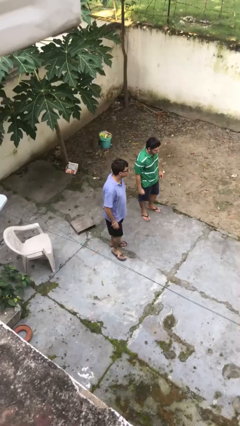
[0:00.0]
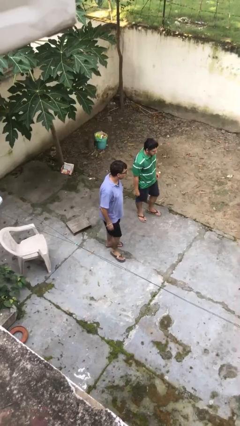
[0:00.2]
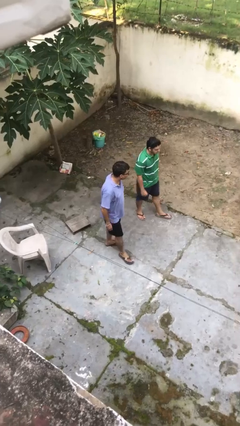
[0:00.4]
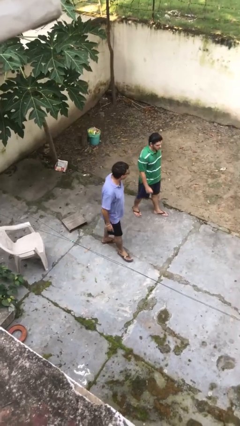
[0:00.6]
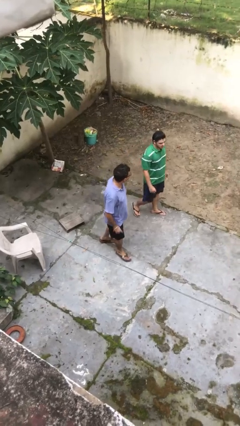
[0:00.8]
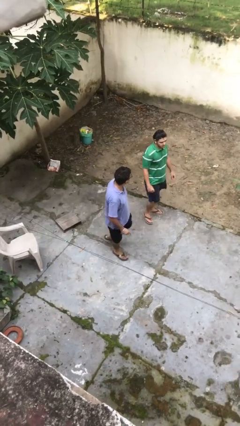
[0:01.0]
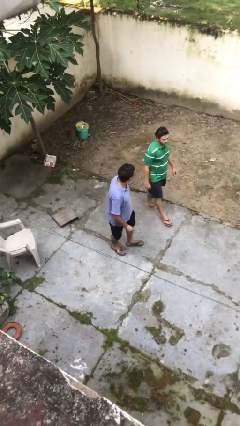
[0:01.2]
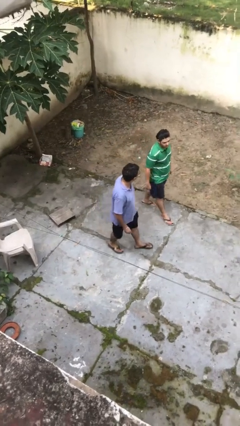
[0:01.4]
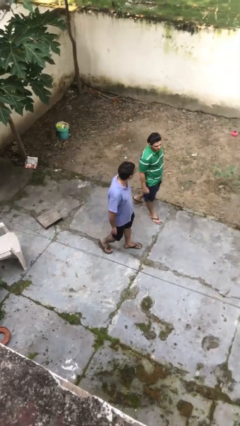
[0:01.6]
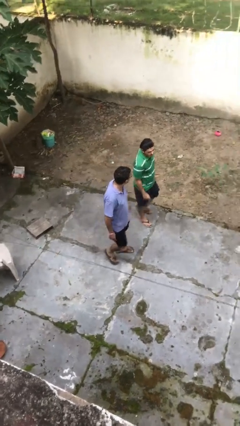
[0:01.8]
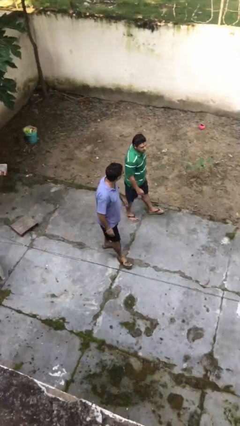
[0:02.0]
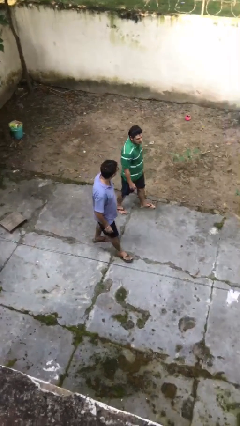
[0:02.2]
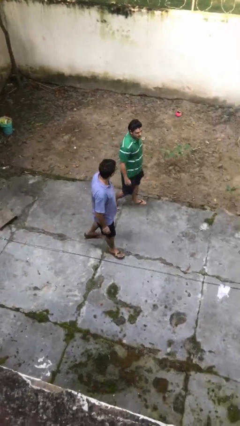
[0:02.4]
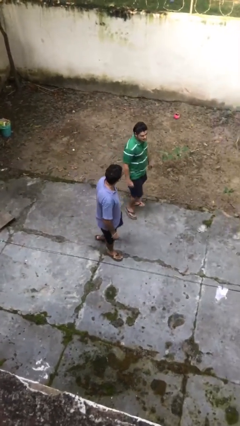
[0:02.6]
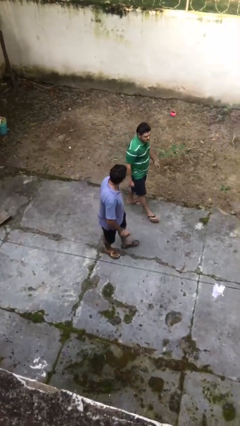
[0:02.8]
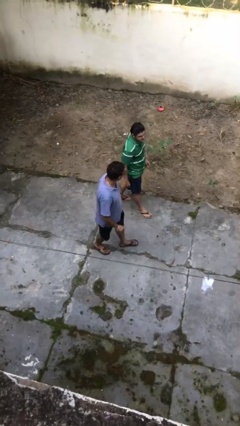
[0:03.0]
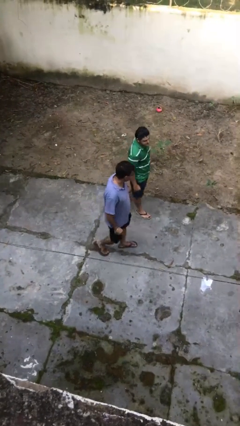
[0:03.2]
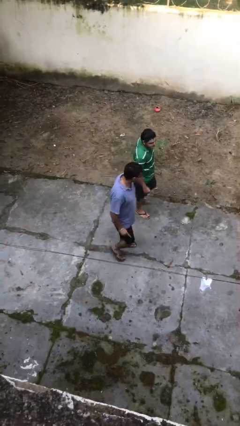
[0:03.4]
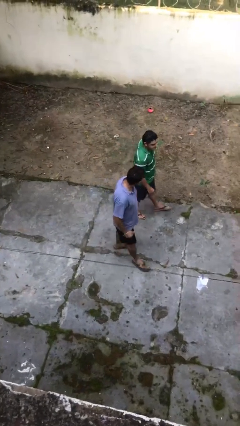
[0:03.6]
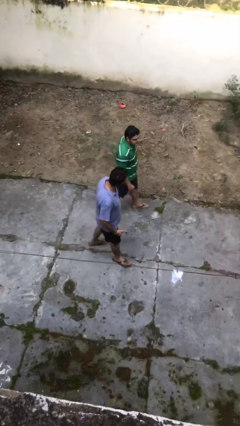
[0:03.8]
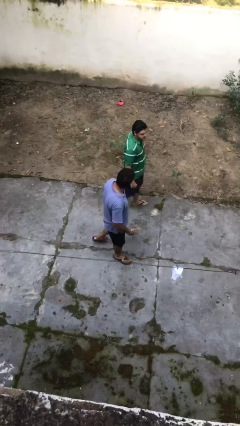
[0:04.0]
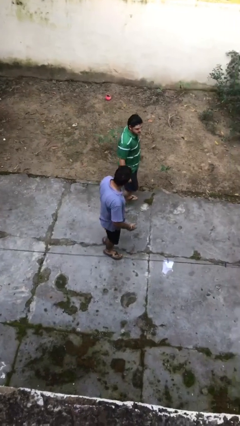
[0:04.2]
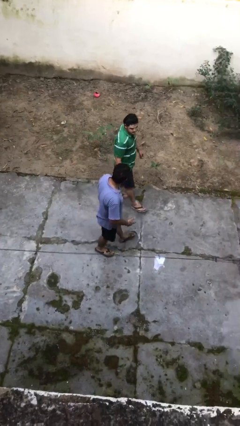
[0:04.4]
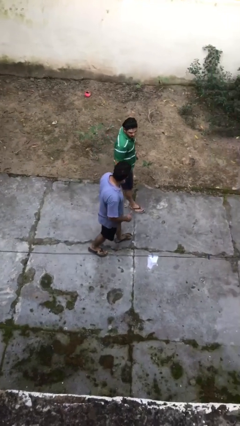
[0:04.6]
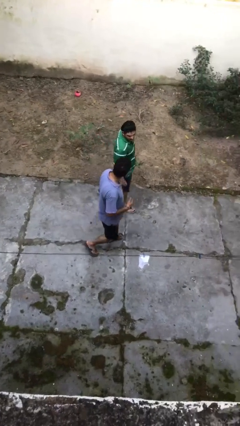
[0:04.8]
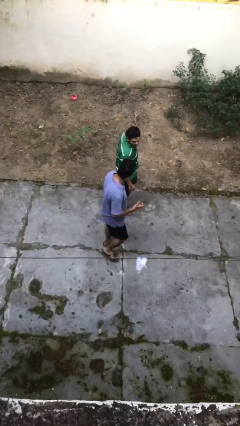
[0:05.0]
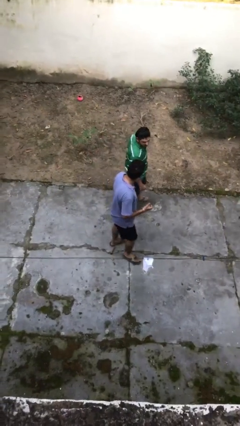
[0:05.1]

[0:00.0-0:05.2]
person talks to person

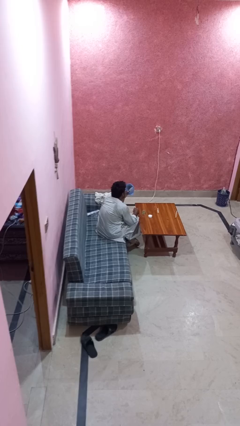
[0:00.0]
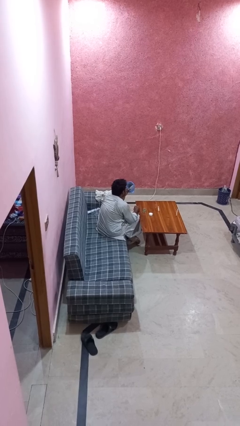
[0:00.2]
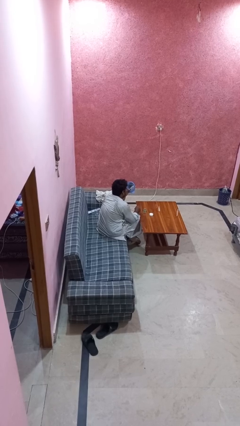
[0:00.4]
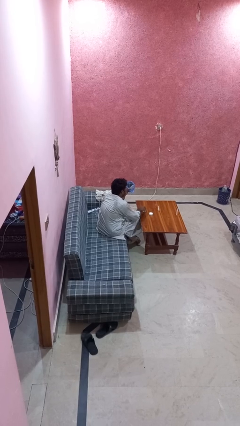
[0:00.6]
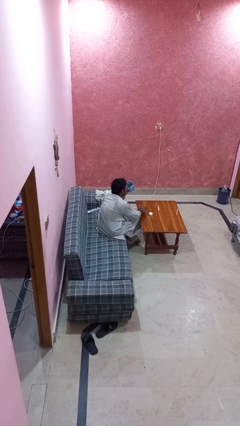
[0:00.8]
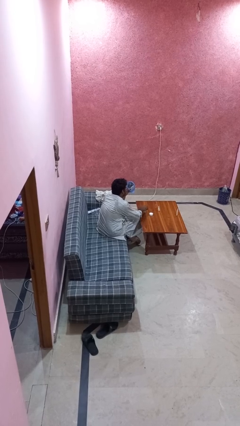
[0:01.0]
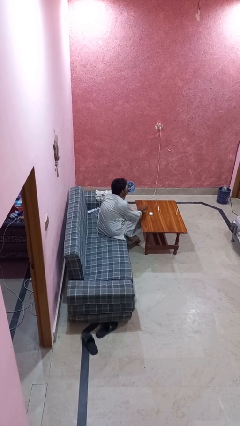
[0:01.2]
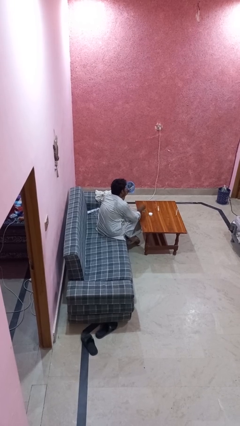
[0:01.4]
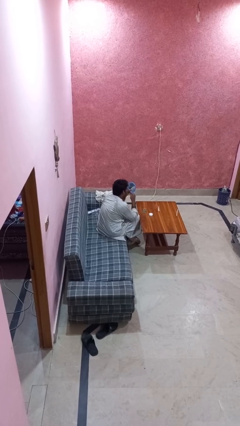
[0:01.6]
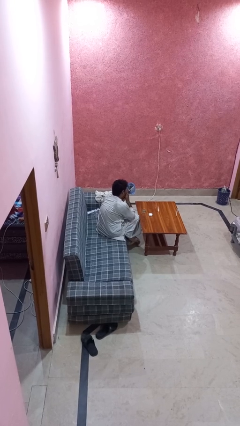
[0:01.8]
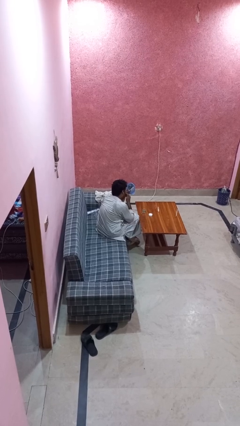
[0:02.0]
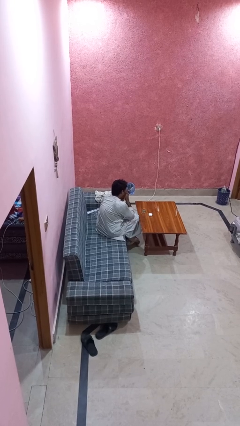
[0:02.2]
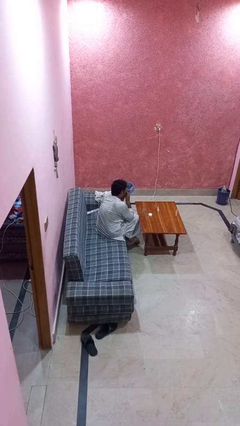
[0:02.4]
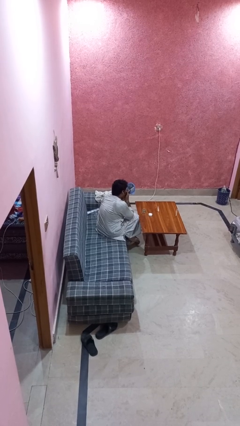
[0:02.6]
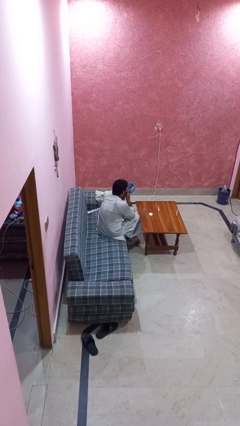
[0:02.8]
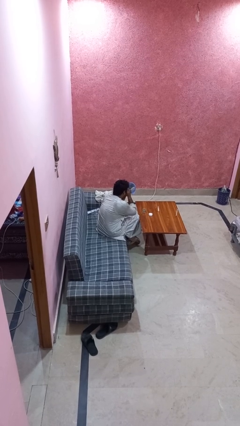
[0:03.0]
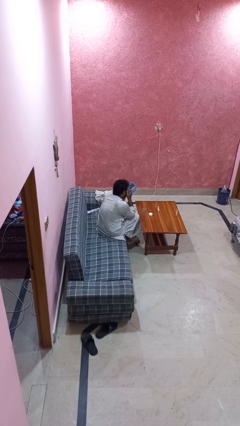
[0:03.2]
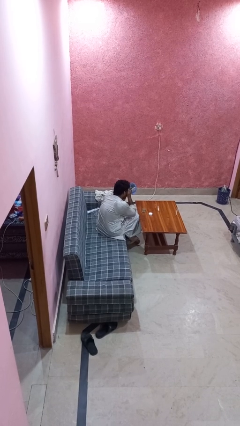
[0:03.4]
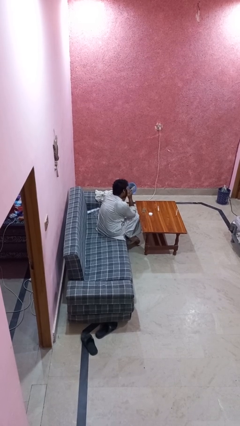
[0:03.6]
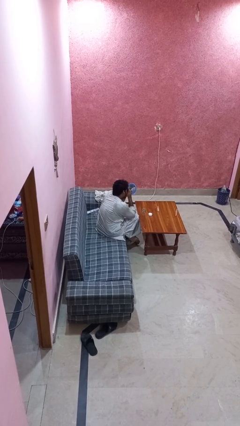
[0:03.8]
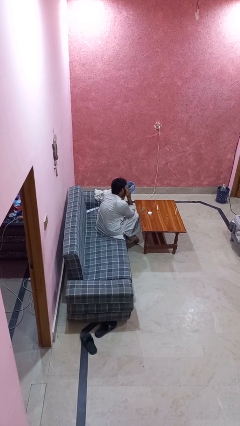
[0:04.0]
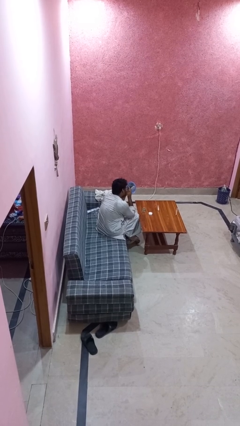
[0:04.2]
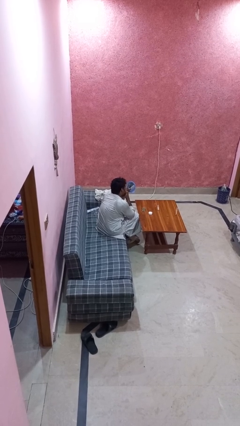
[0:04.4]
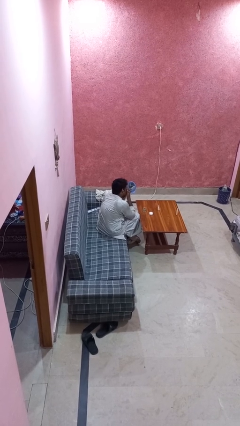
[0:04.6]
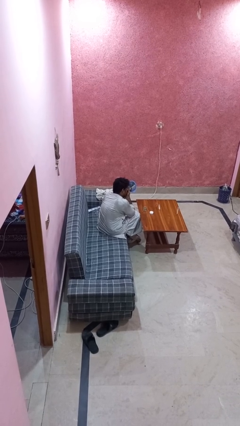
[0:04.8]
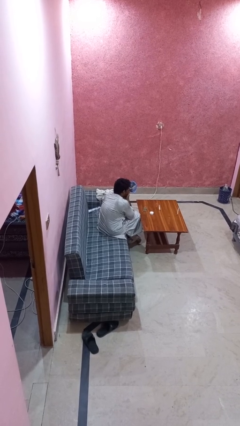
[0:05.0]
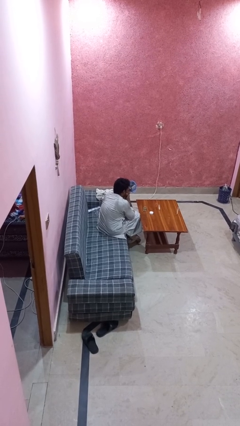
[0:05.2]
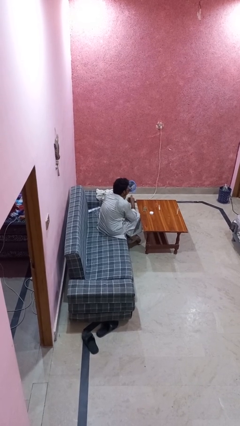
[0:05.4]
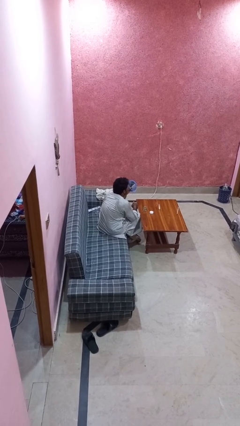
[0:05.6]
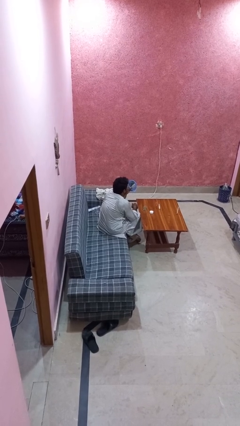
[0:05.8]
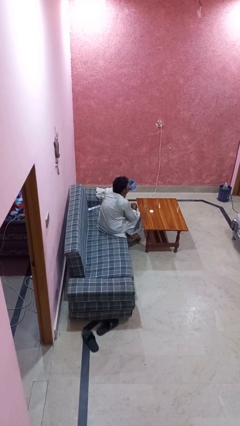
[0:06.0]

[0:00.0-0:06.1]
person applies foundation makeup

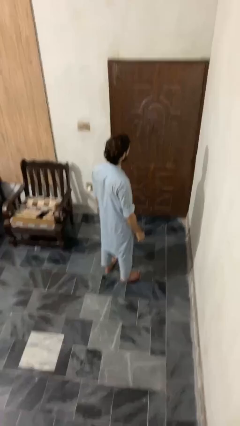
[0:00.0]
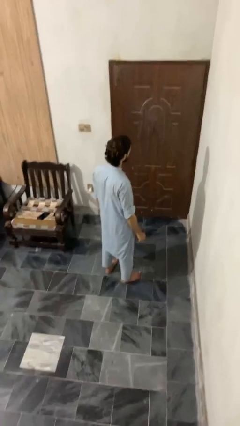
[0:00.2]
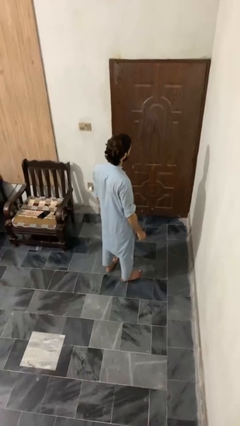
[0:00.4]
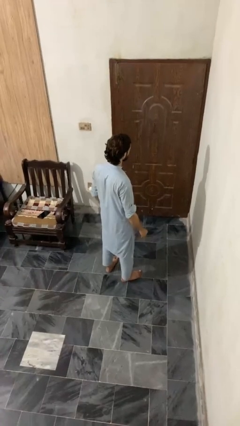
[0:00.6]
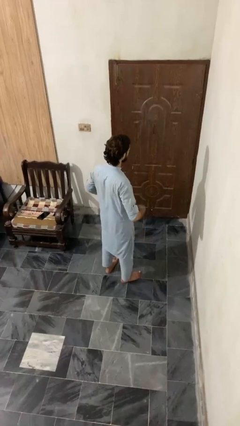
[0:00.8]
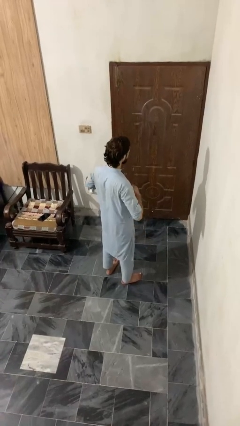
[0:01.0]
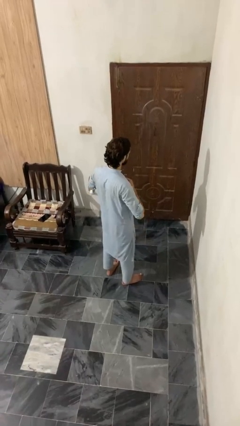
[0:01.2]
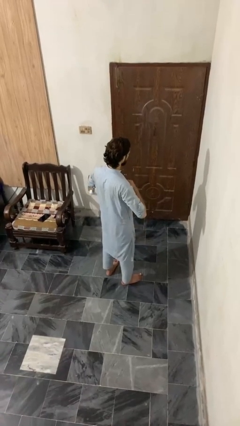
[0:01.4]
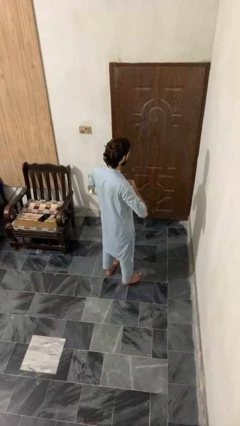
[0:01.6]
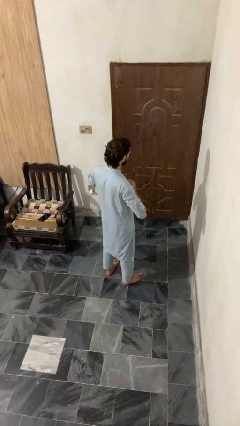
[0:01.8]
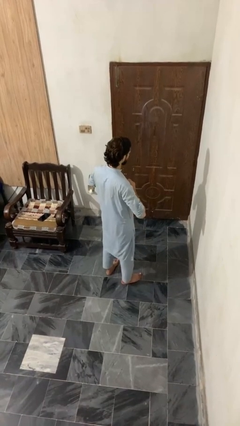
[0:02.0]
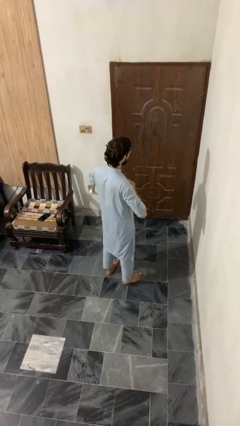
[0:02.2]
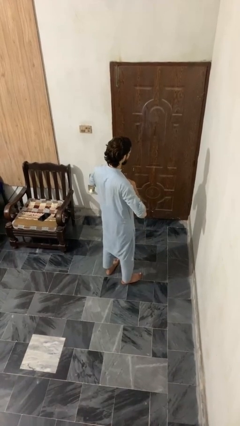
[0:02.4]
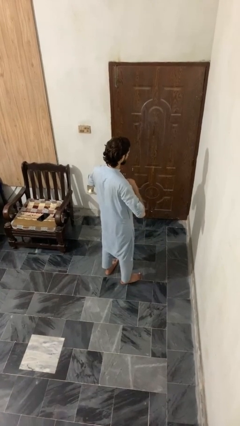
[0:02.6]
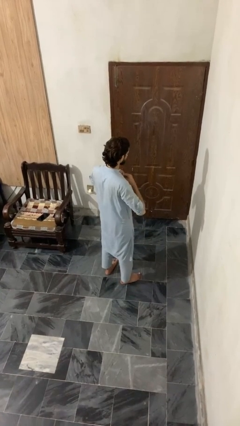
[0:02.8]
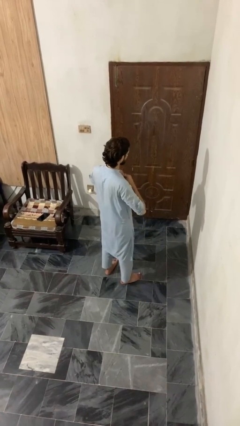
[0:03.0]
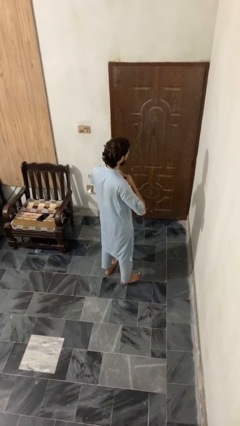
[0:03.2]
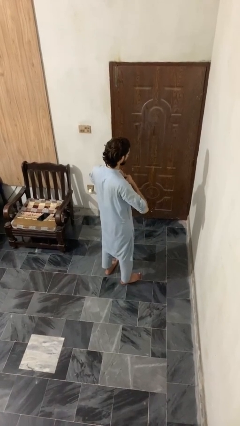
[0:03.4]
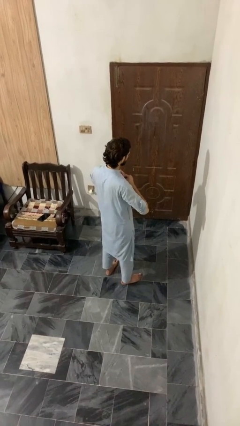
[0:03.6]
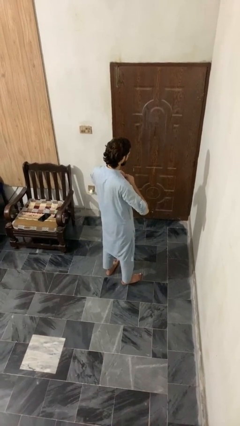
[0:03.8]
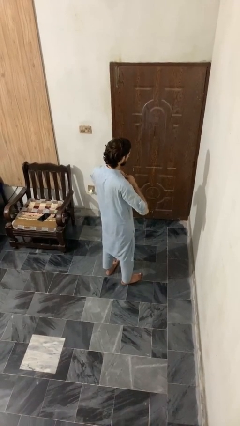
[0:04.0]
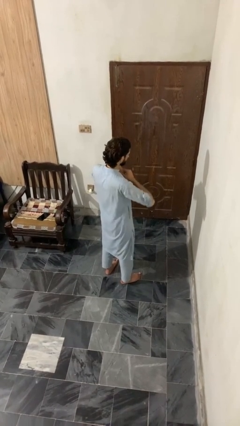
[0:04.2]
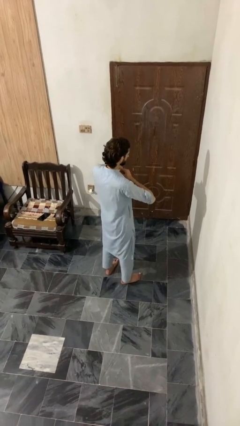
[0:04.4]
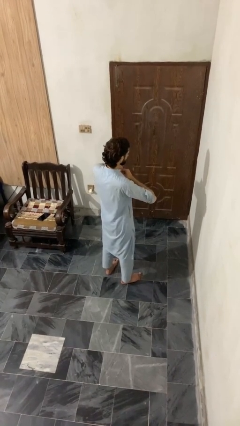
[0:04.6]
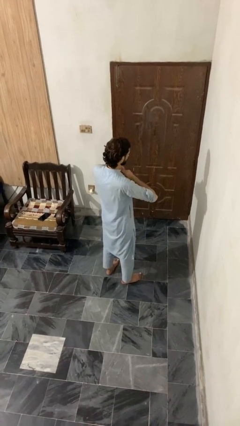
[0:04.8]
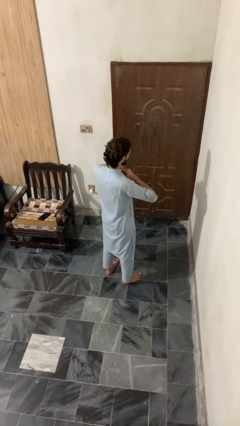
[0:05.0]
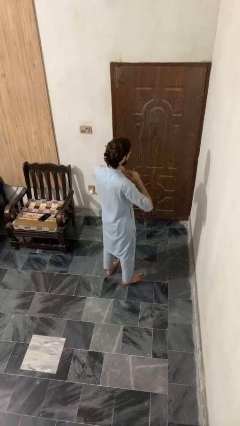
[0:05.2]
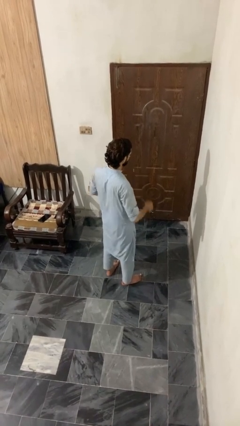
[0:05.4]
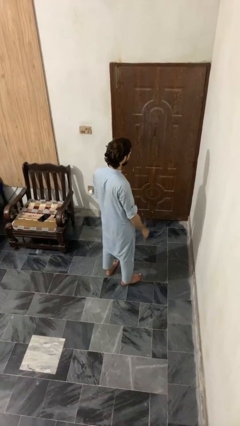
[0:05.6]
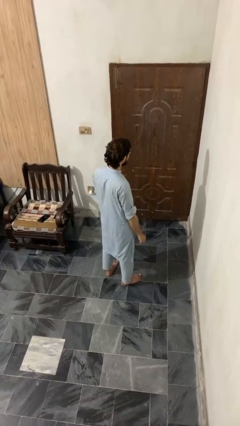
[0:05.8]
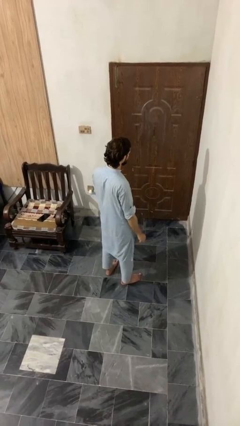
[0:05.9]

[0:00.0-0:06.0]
person buttons shirt

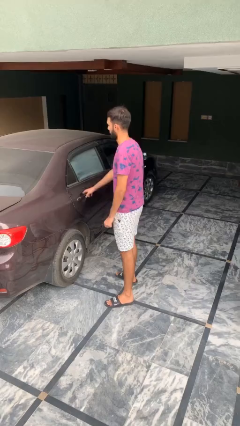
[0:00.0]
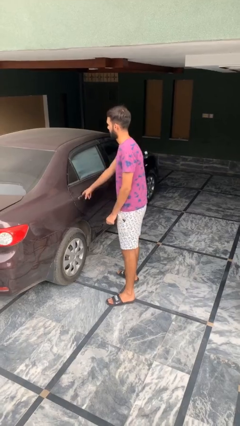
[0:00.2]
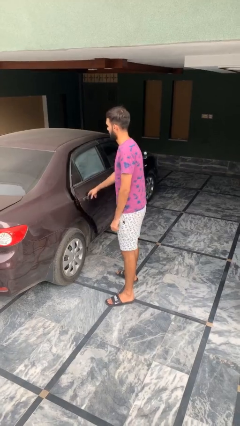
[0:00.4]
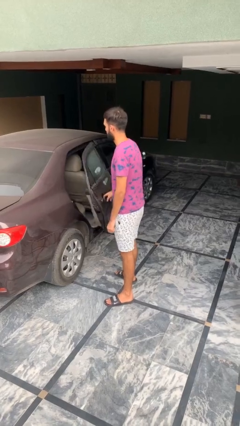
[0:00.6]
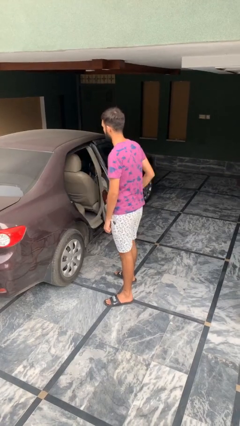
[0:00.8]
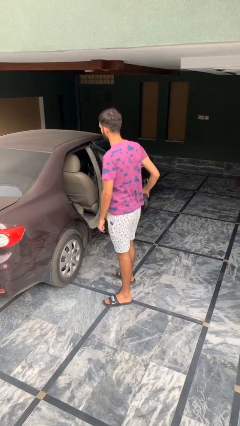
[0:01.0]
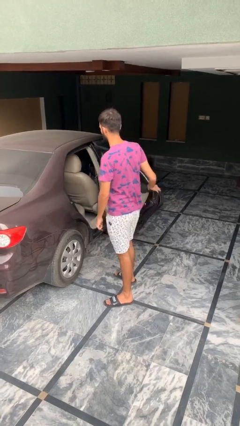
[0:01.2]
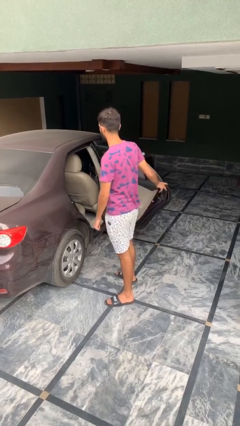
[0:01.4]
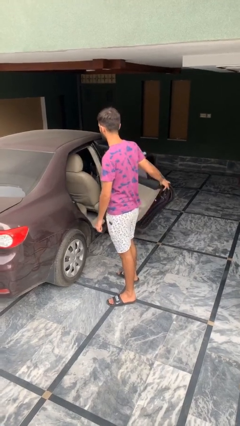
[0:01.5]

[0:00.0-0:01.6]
person opens car door
